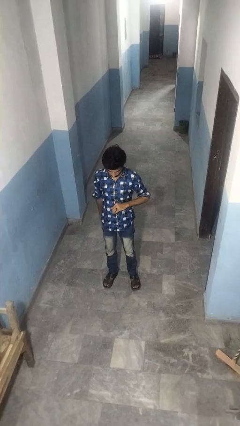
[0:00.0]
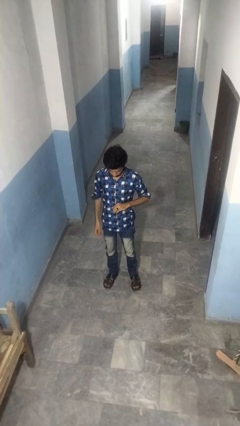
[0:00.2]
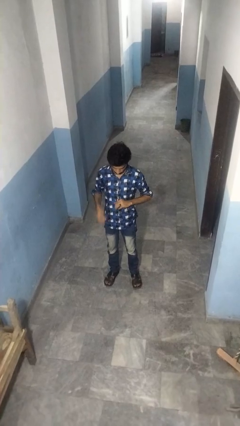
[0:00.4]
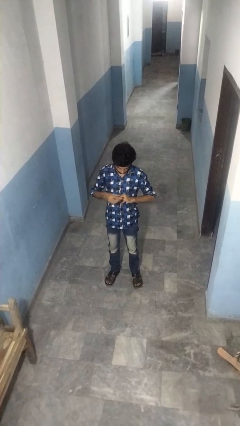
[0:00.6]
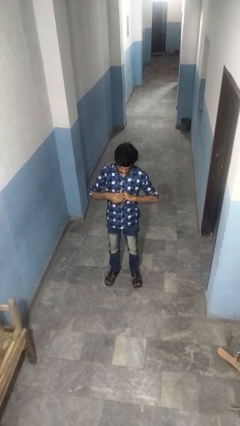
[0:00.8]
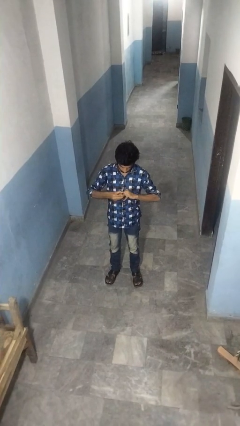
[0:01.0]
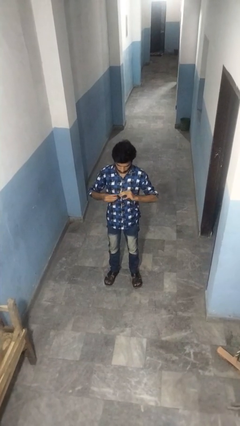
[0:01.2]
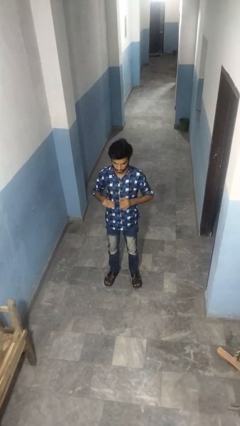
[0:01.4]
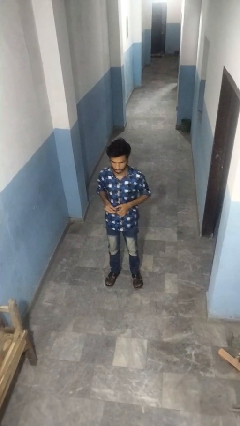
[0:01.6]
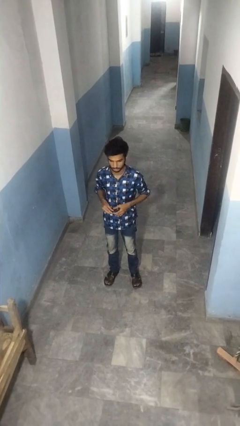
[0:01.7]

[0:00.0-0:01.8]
person takes off ring

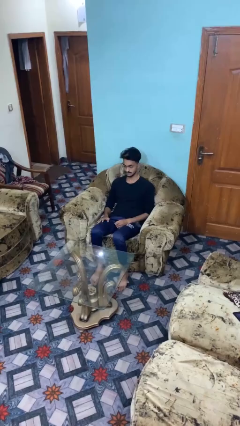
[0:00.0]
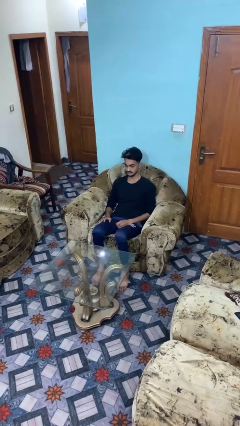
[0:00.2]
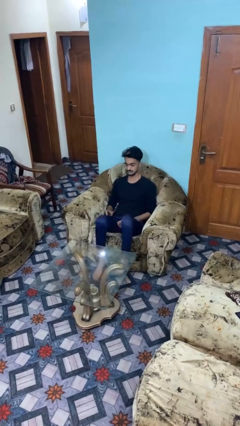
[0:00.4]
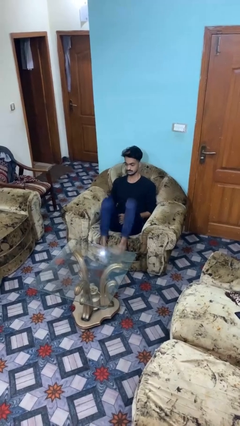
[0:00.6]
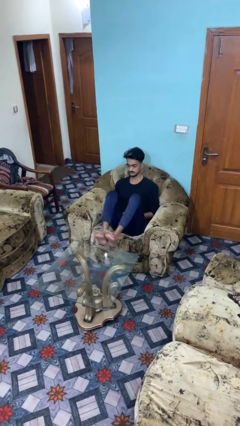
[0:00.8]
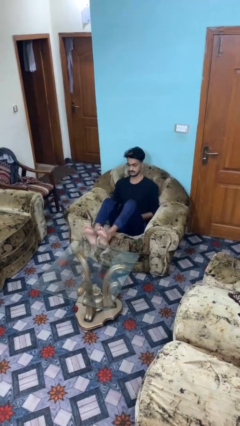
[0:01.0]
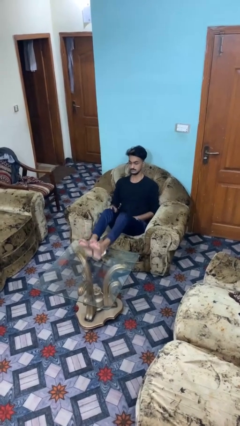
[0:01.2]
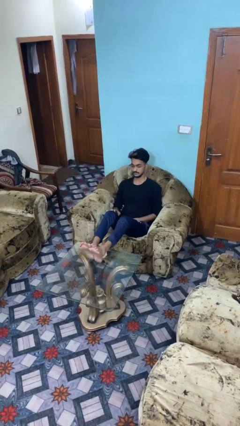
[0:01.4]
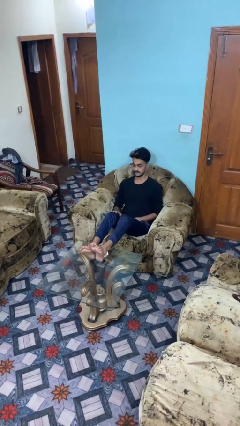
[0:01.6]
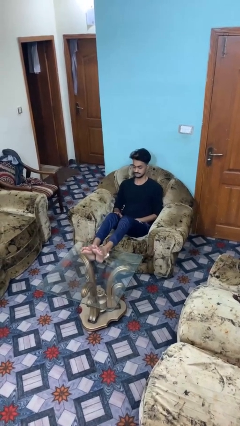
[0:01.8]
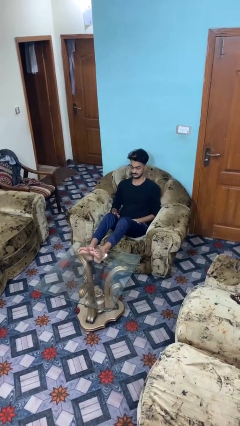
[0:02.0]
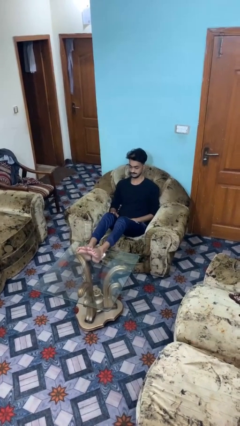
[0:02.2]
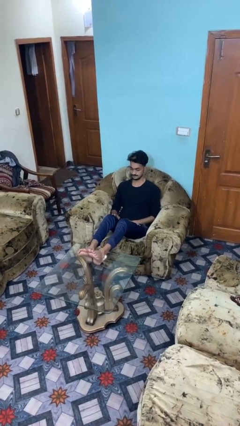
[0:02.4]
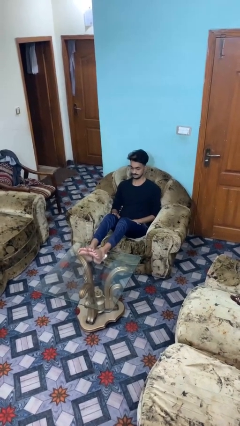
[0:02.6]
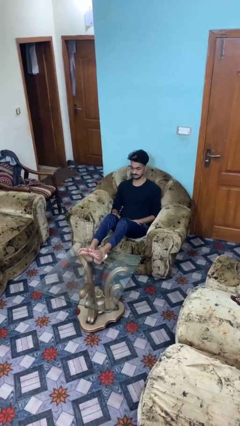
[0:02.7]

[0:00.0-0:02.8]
person puts feet up

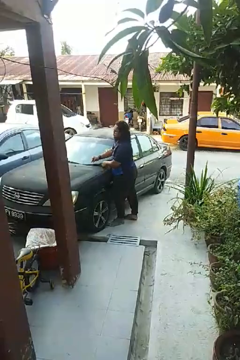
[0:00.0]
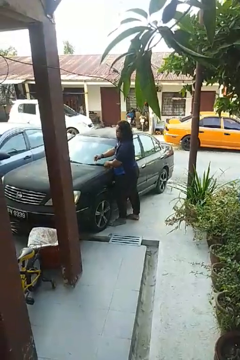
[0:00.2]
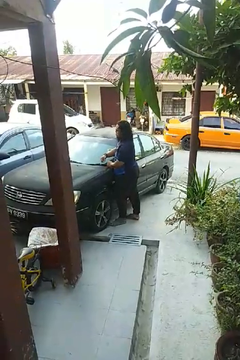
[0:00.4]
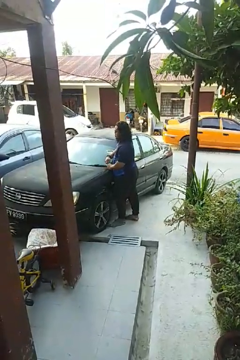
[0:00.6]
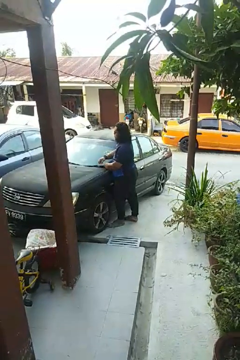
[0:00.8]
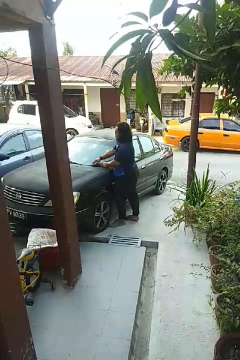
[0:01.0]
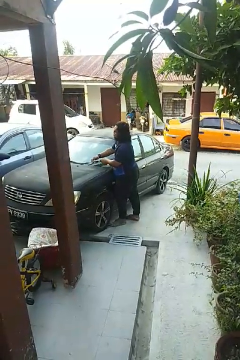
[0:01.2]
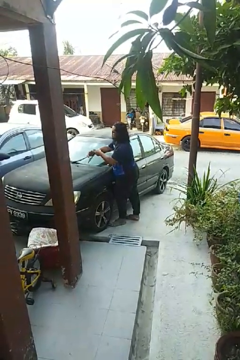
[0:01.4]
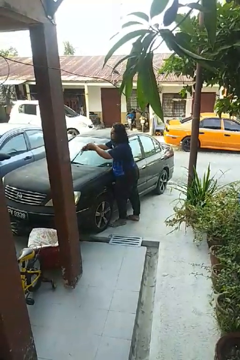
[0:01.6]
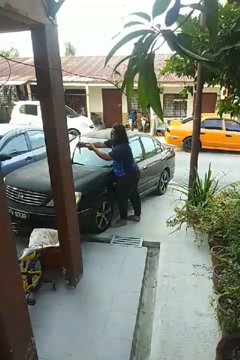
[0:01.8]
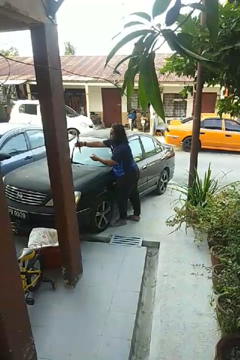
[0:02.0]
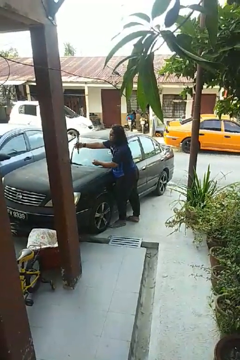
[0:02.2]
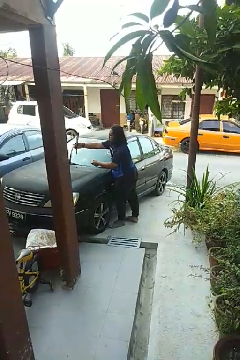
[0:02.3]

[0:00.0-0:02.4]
person flips up car wipers

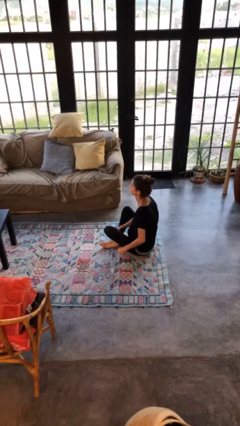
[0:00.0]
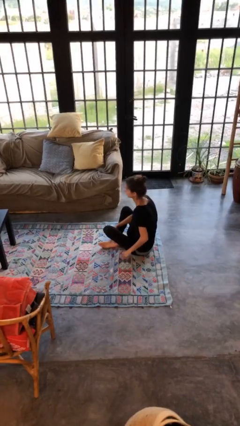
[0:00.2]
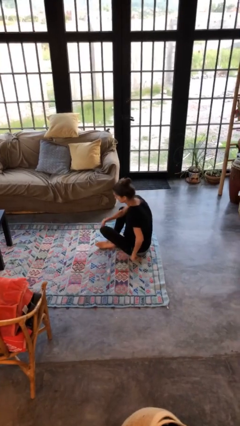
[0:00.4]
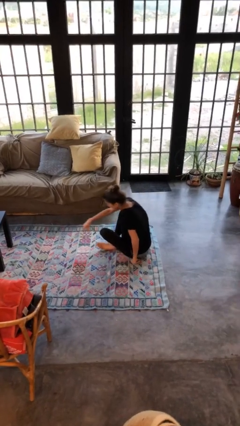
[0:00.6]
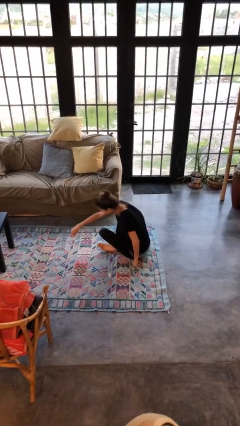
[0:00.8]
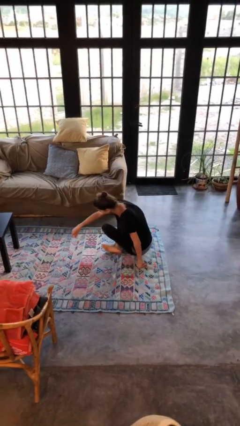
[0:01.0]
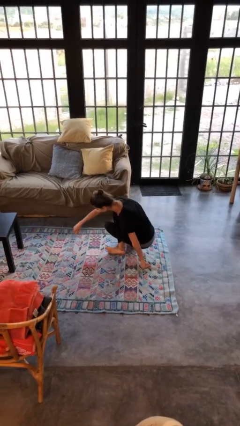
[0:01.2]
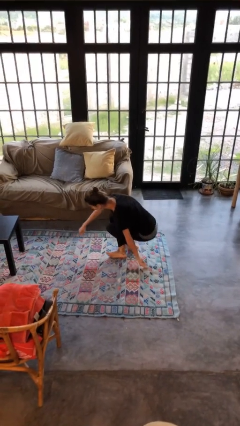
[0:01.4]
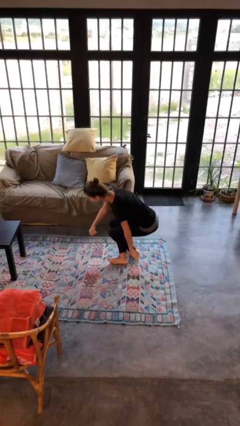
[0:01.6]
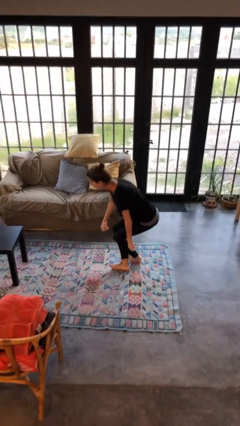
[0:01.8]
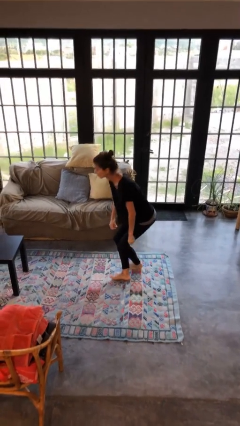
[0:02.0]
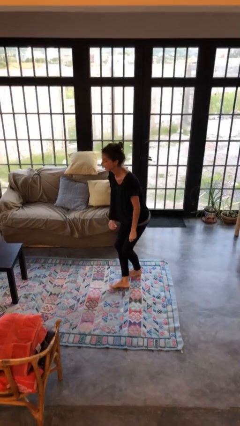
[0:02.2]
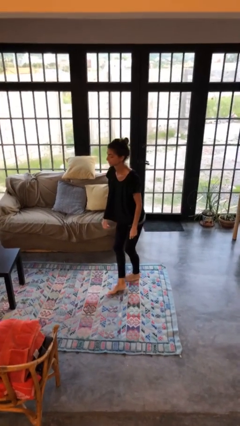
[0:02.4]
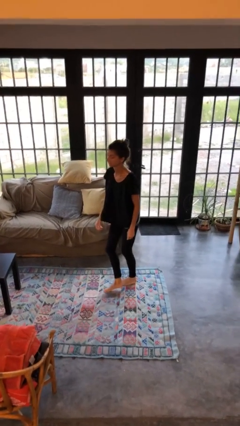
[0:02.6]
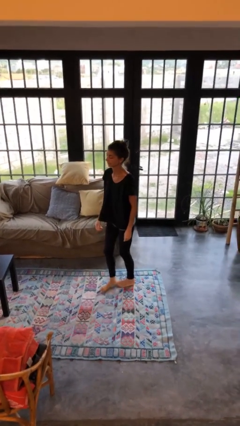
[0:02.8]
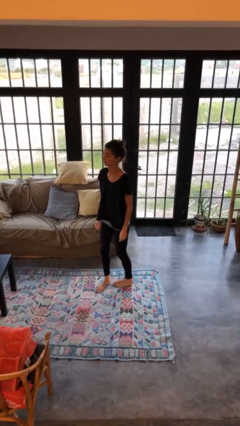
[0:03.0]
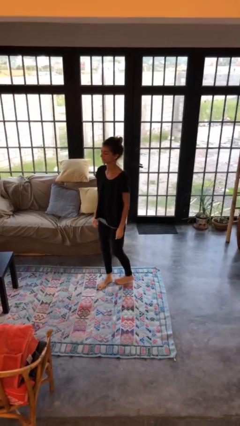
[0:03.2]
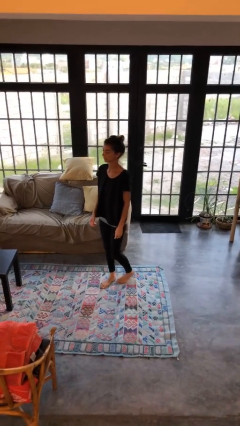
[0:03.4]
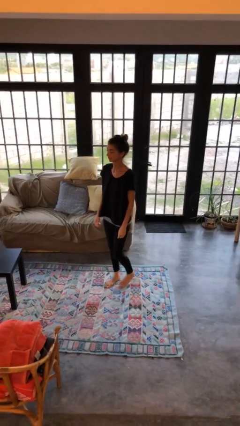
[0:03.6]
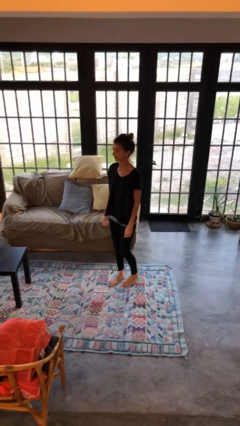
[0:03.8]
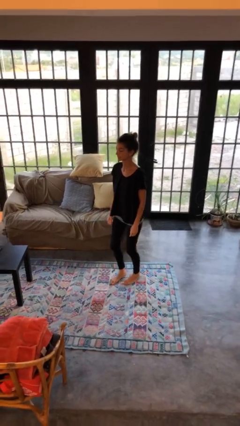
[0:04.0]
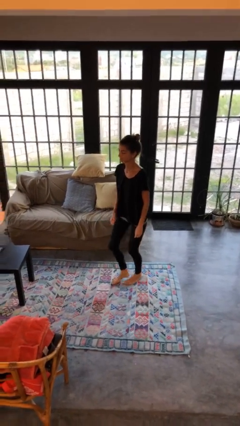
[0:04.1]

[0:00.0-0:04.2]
person stands up from floor

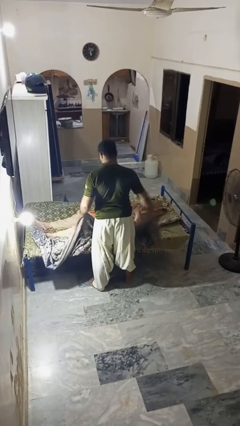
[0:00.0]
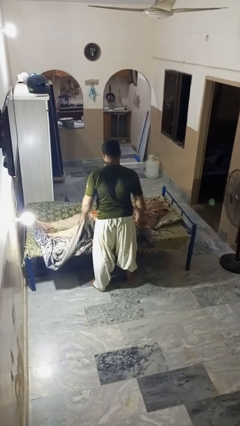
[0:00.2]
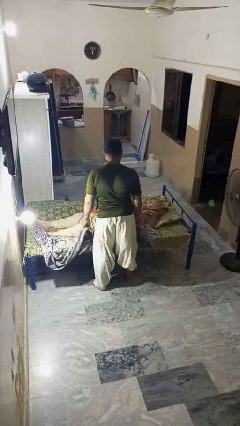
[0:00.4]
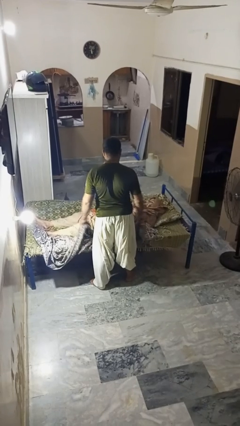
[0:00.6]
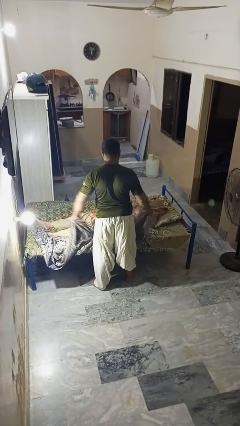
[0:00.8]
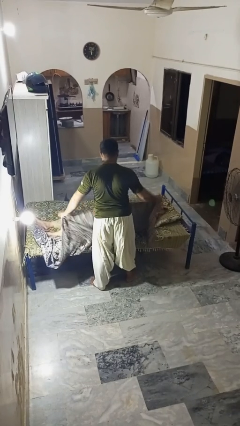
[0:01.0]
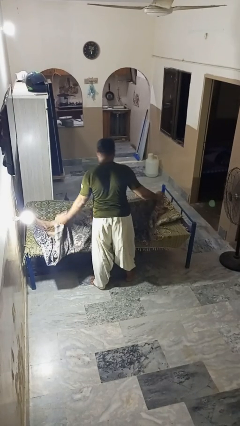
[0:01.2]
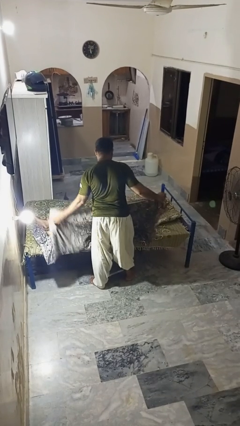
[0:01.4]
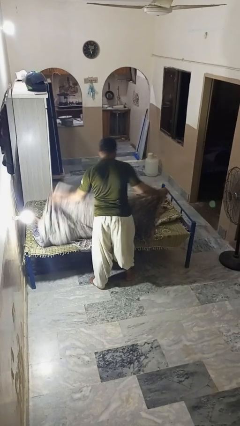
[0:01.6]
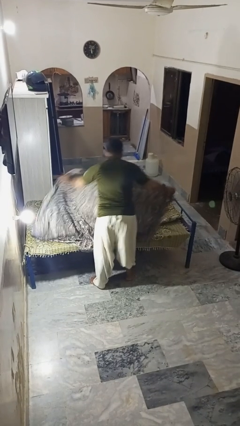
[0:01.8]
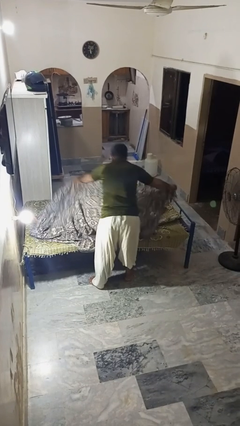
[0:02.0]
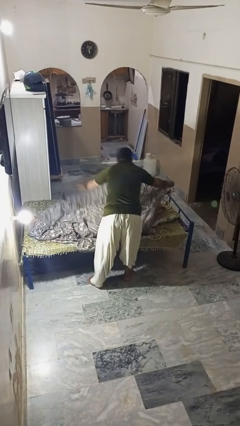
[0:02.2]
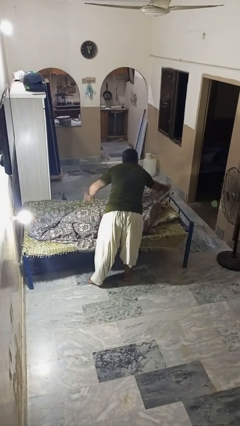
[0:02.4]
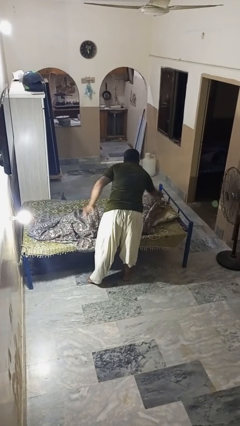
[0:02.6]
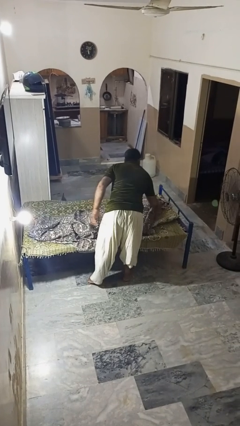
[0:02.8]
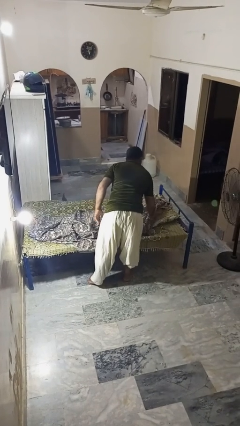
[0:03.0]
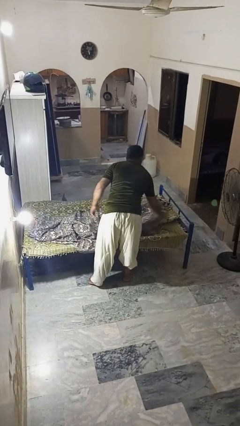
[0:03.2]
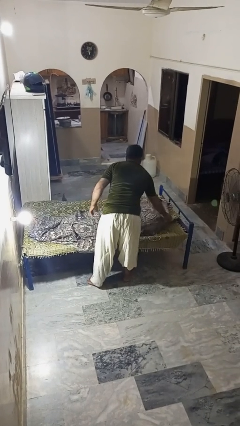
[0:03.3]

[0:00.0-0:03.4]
person covers friend with blanket

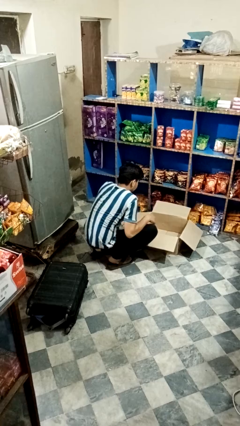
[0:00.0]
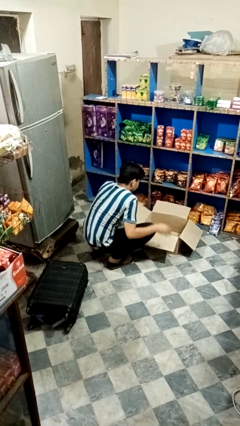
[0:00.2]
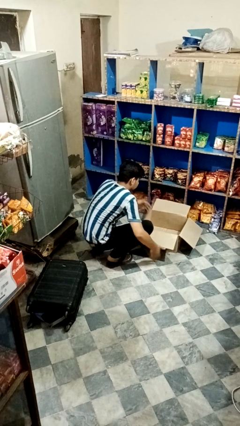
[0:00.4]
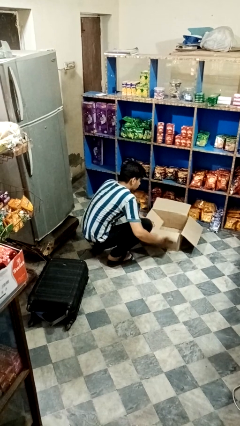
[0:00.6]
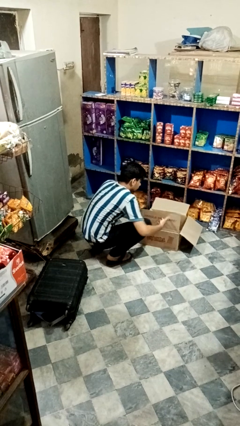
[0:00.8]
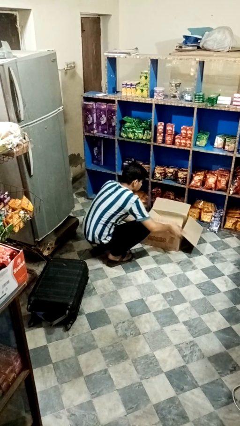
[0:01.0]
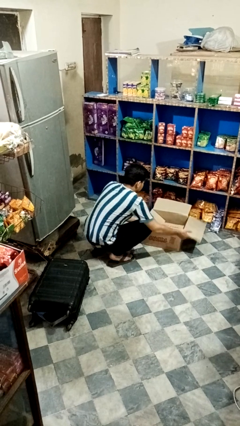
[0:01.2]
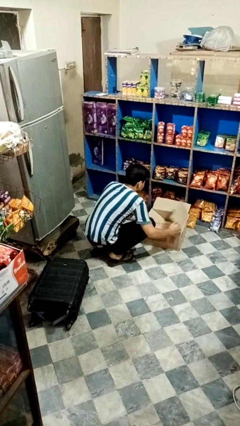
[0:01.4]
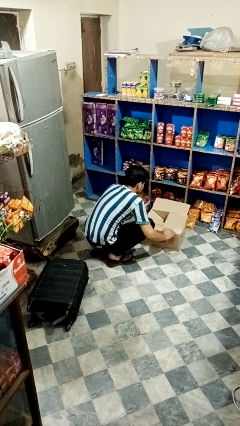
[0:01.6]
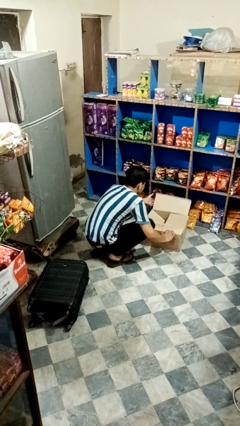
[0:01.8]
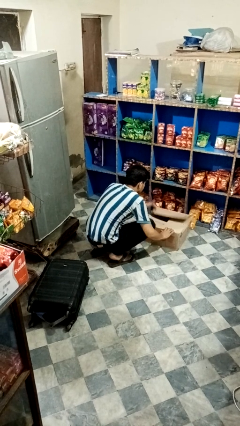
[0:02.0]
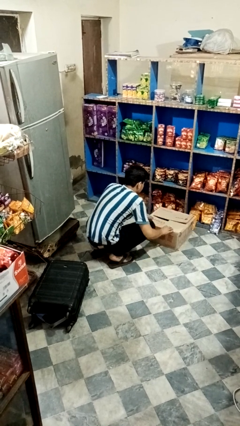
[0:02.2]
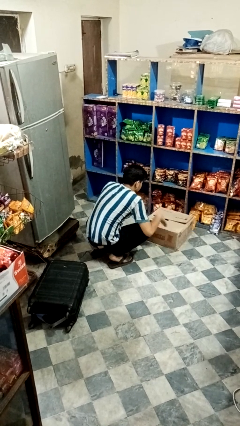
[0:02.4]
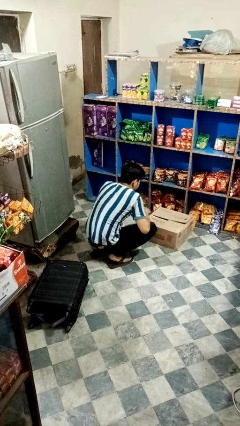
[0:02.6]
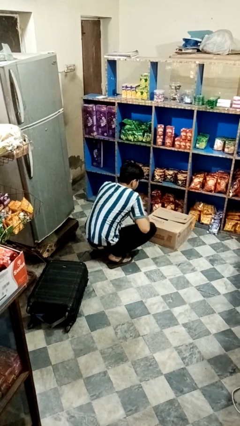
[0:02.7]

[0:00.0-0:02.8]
person closes box
